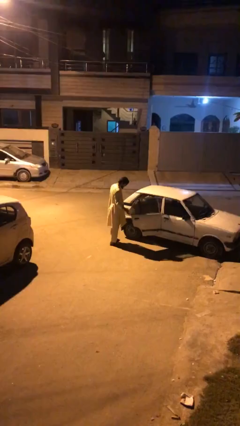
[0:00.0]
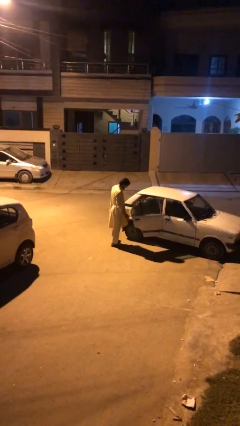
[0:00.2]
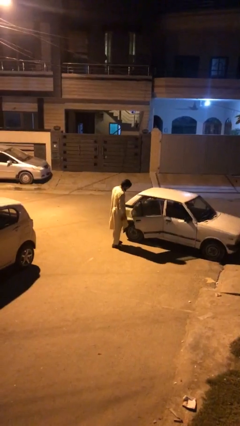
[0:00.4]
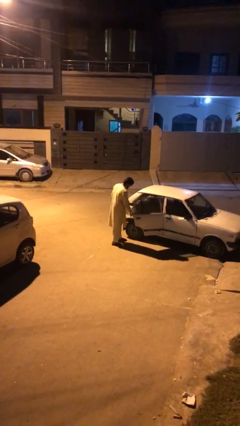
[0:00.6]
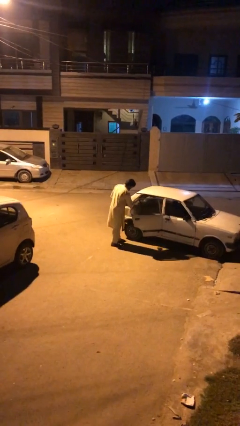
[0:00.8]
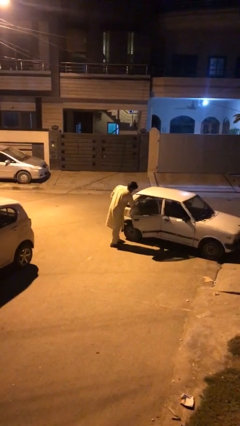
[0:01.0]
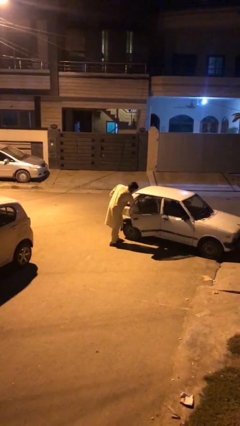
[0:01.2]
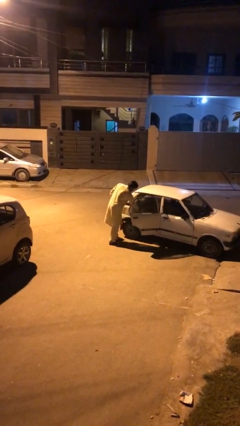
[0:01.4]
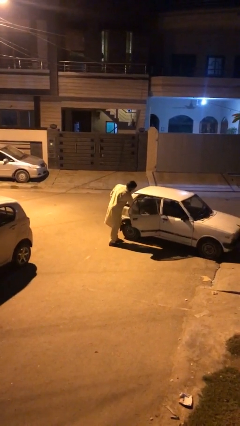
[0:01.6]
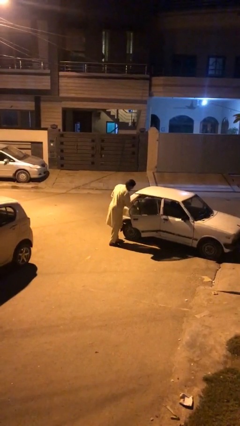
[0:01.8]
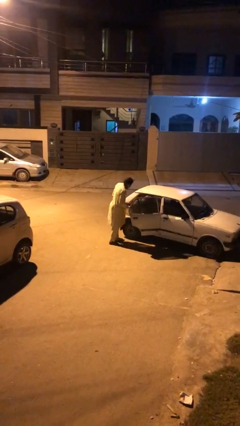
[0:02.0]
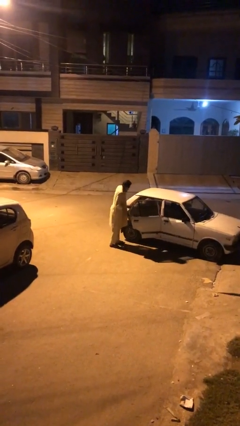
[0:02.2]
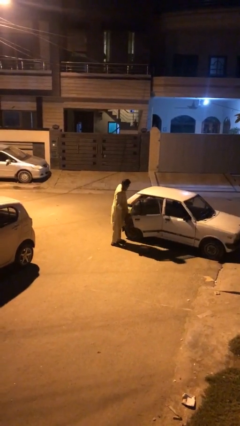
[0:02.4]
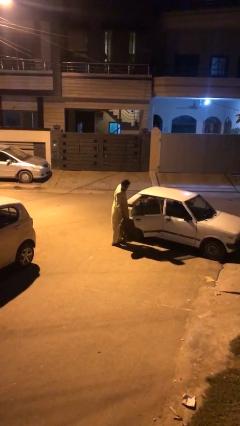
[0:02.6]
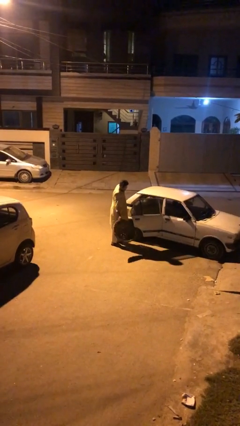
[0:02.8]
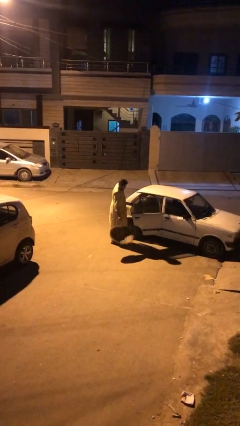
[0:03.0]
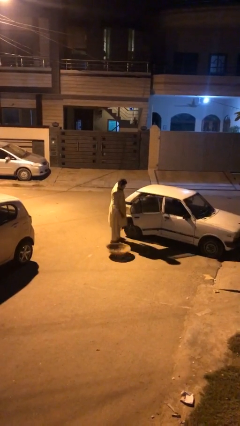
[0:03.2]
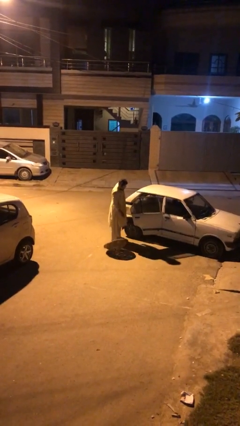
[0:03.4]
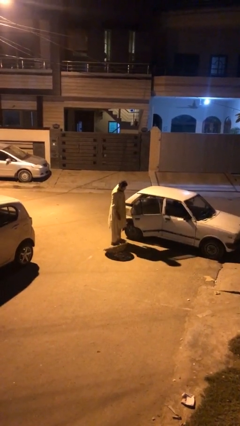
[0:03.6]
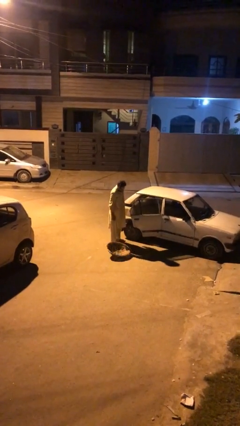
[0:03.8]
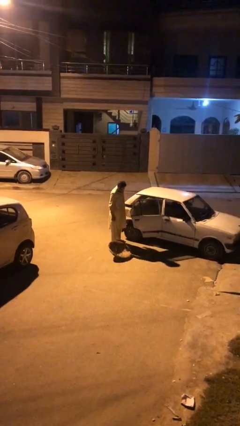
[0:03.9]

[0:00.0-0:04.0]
person unloads car

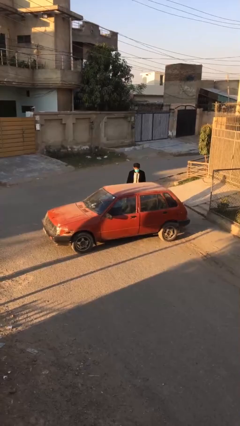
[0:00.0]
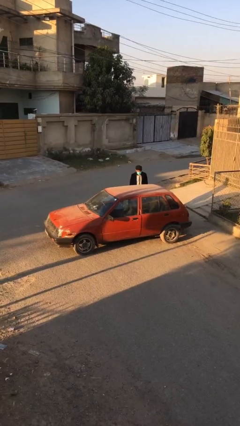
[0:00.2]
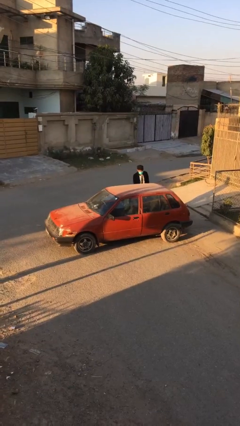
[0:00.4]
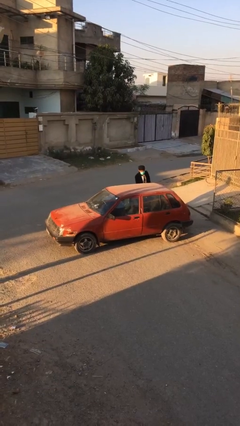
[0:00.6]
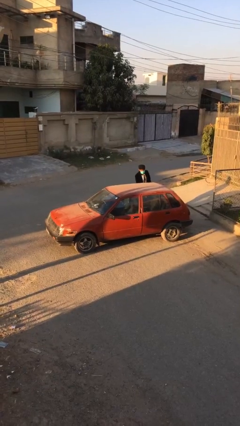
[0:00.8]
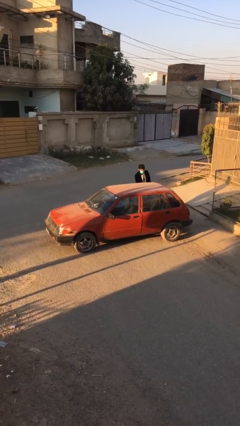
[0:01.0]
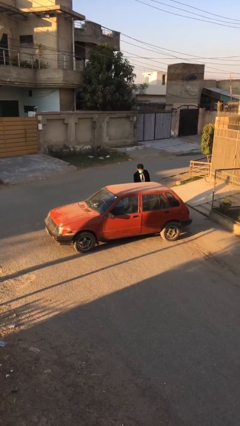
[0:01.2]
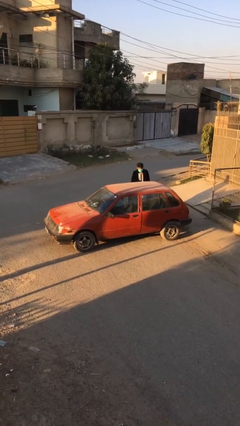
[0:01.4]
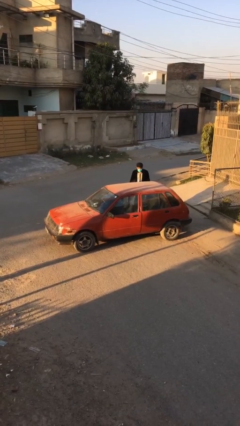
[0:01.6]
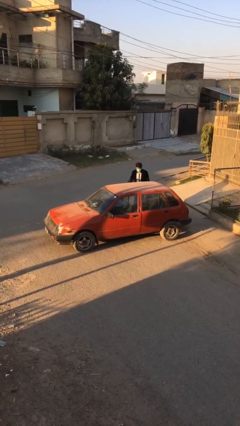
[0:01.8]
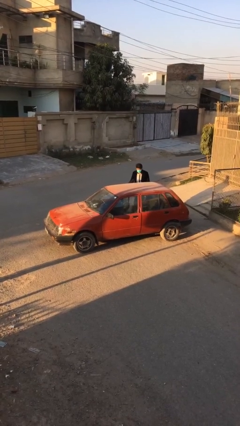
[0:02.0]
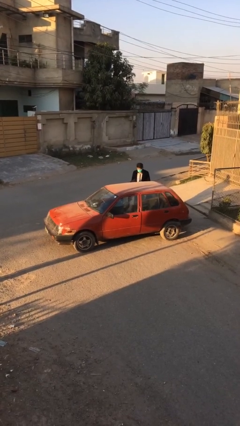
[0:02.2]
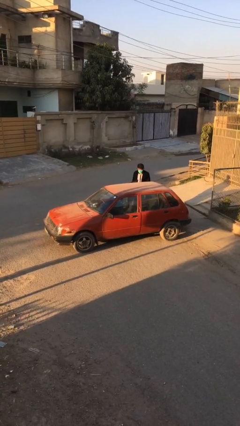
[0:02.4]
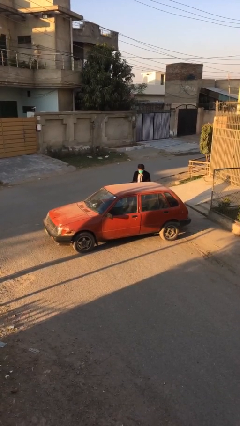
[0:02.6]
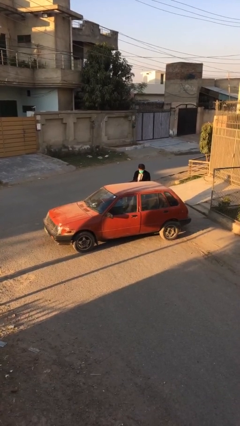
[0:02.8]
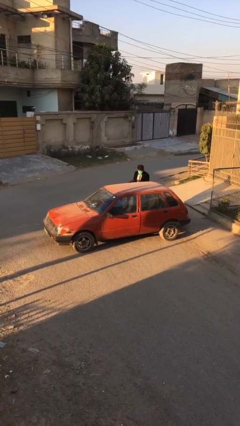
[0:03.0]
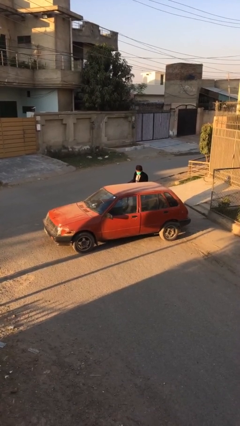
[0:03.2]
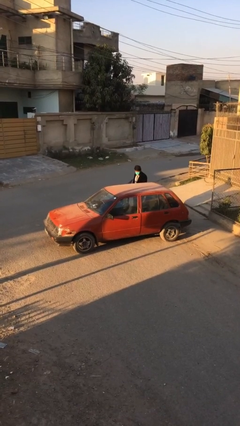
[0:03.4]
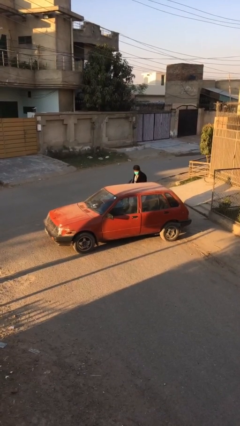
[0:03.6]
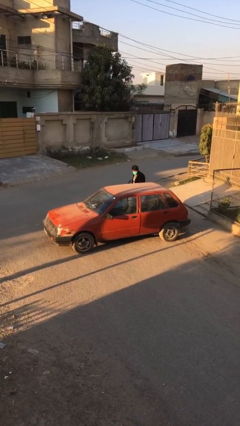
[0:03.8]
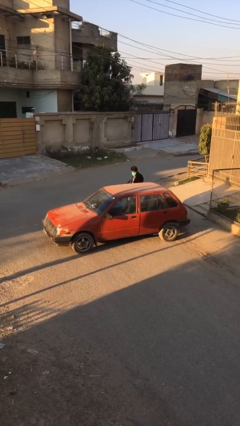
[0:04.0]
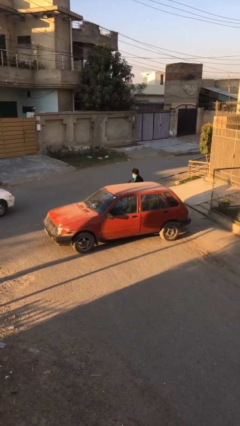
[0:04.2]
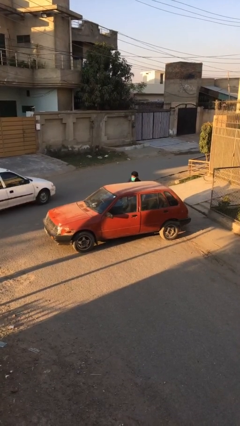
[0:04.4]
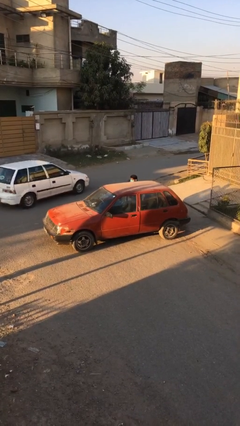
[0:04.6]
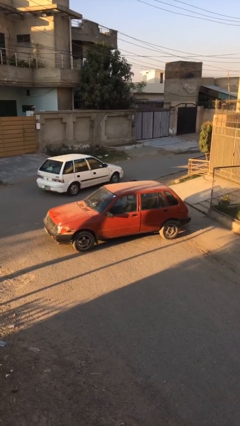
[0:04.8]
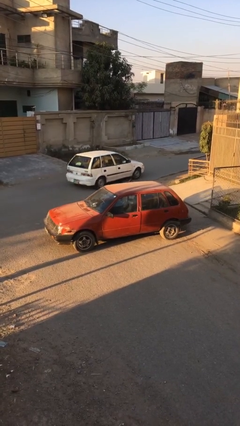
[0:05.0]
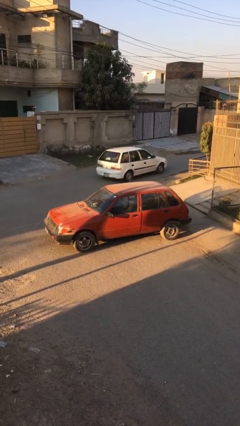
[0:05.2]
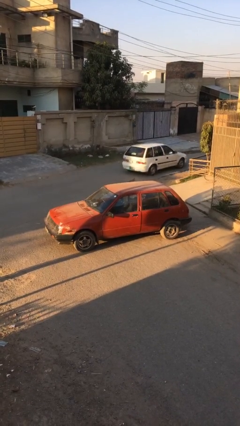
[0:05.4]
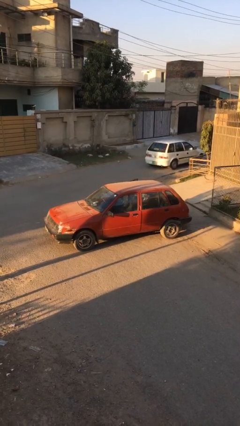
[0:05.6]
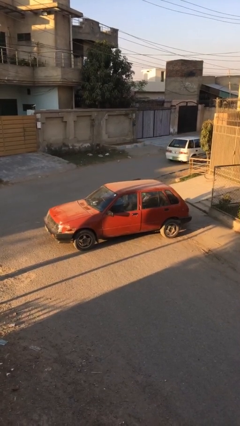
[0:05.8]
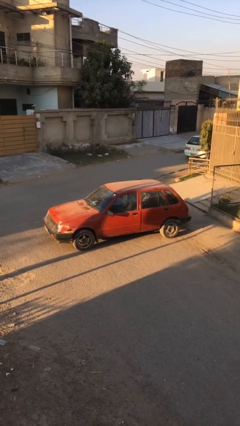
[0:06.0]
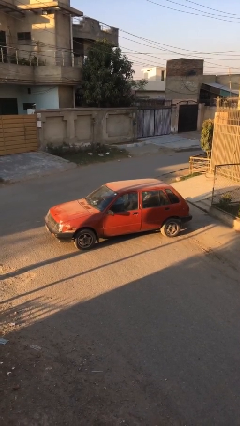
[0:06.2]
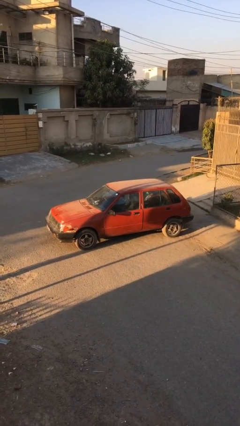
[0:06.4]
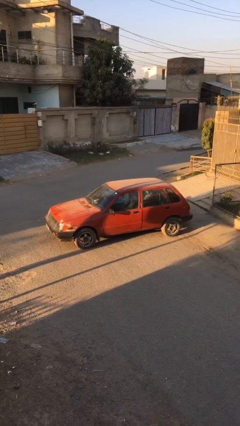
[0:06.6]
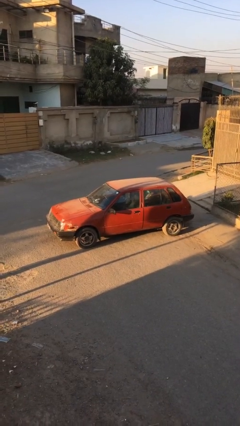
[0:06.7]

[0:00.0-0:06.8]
car picks up person

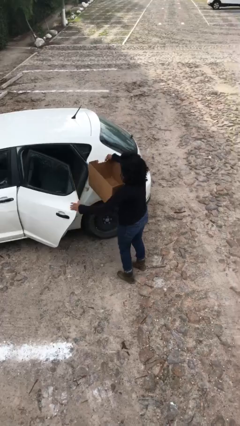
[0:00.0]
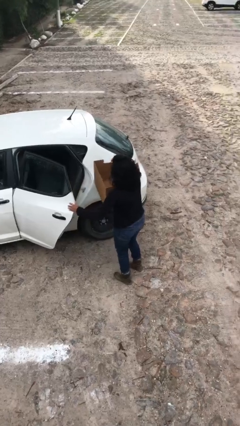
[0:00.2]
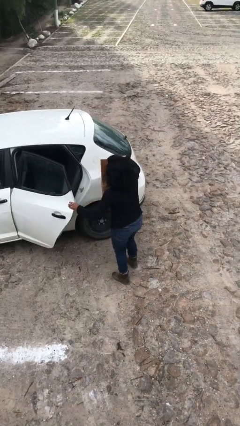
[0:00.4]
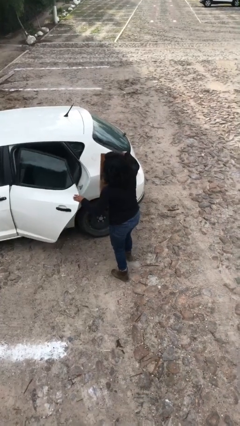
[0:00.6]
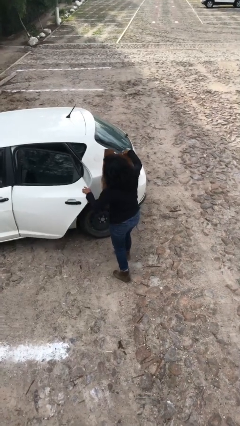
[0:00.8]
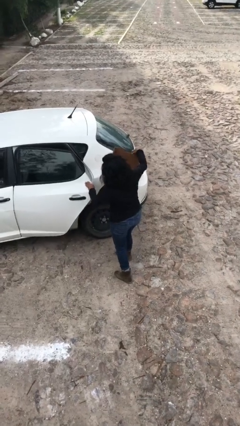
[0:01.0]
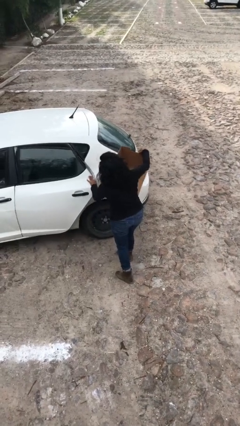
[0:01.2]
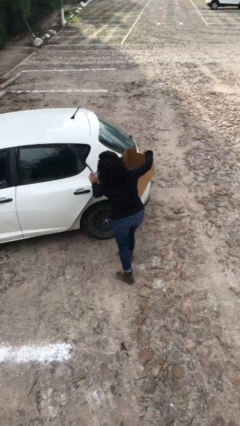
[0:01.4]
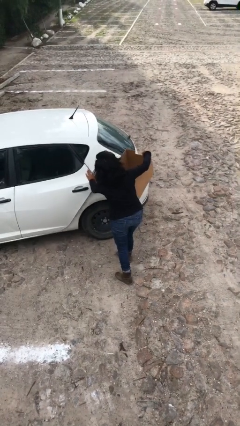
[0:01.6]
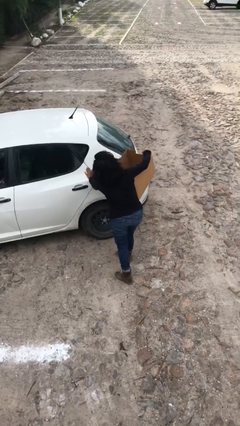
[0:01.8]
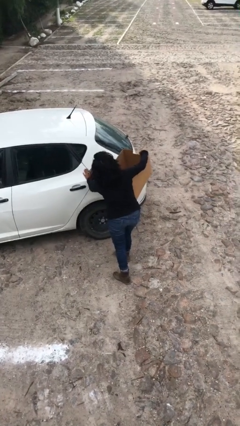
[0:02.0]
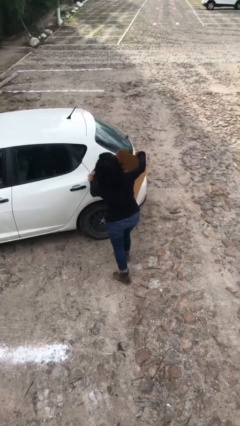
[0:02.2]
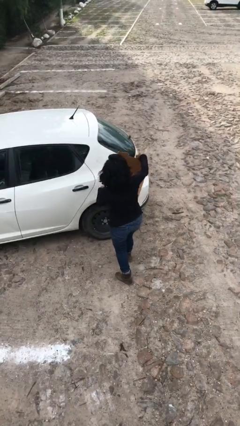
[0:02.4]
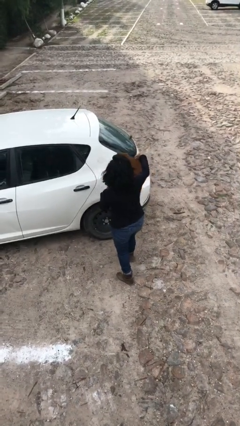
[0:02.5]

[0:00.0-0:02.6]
person closes car door

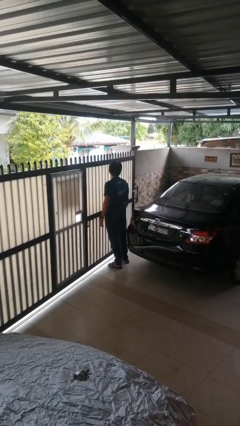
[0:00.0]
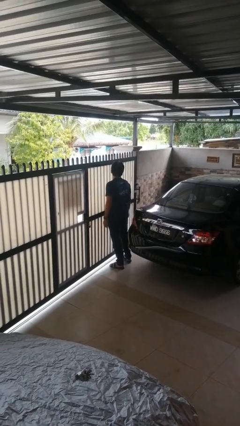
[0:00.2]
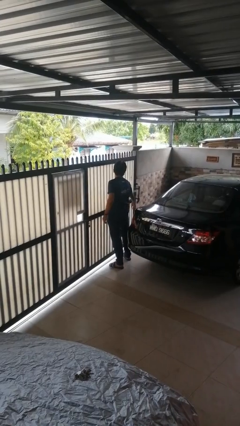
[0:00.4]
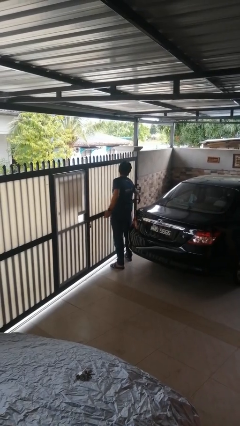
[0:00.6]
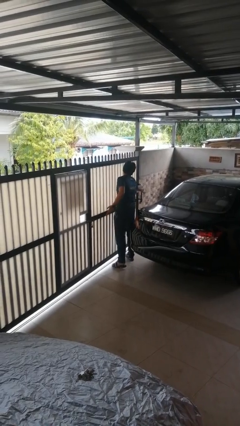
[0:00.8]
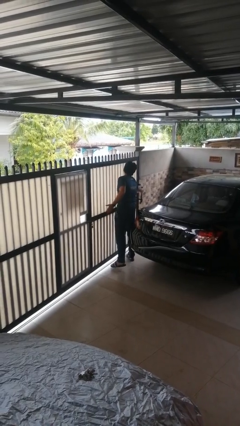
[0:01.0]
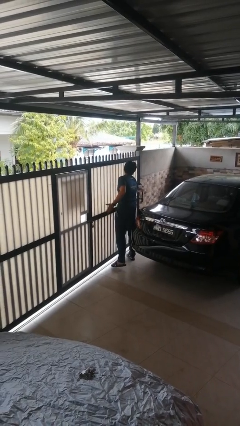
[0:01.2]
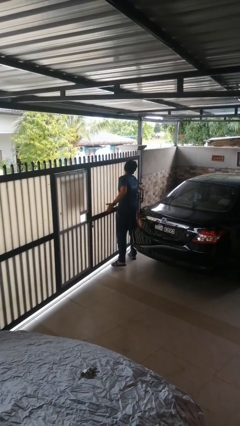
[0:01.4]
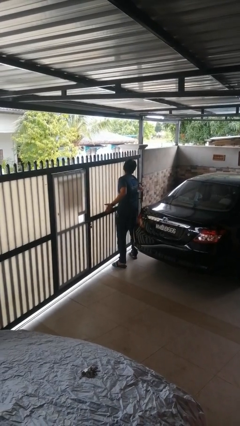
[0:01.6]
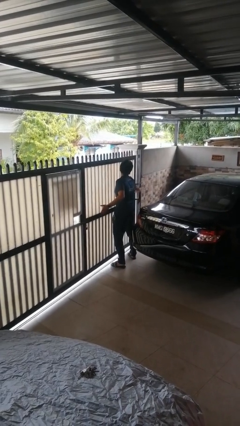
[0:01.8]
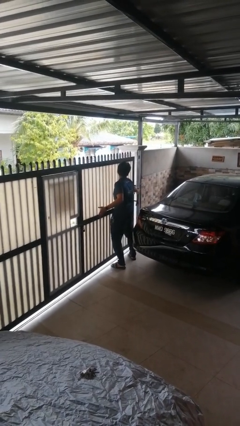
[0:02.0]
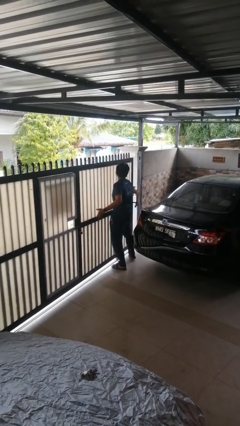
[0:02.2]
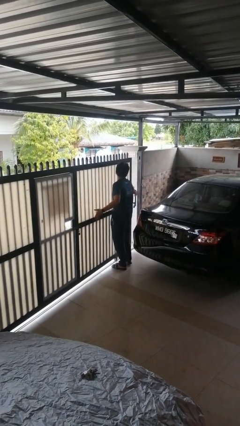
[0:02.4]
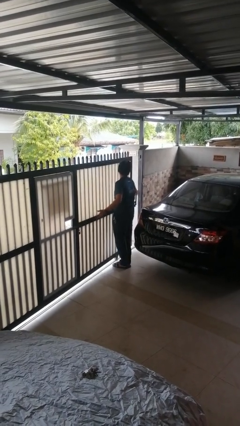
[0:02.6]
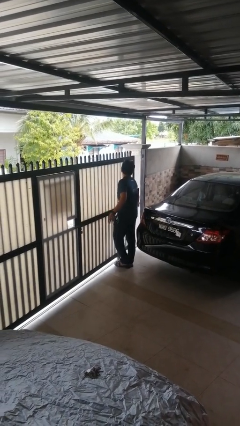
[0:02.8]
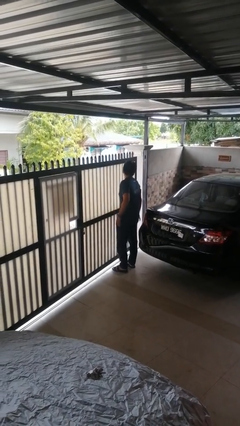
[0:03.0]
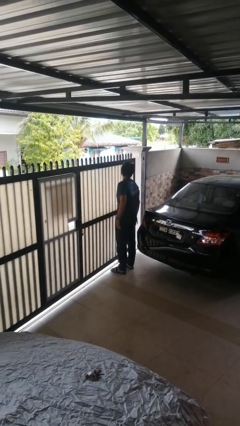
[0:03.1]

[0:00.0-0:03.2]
person opens sliding door

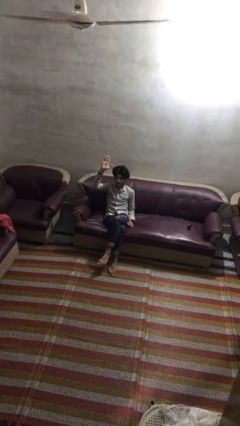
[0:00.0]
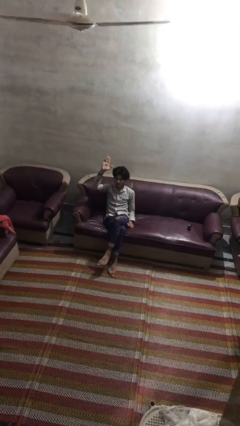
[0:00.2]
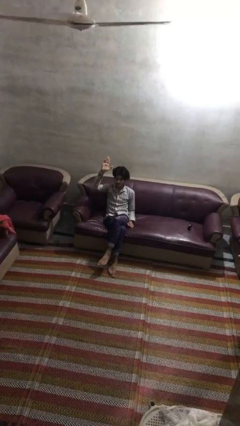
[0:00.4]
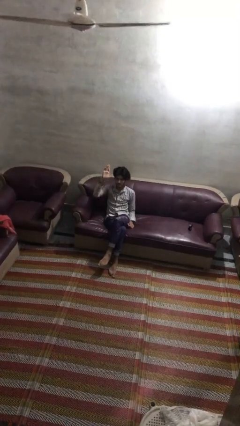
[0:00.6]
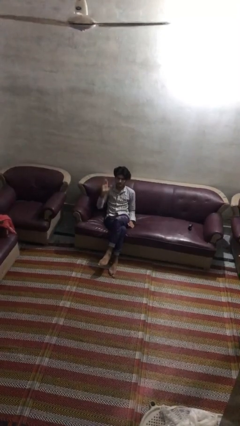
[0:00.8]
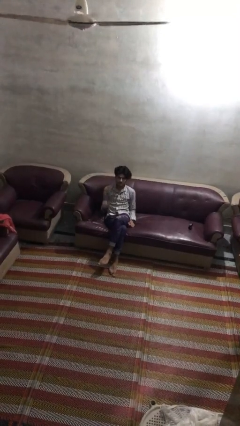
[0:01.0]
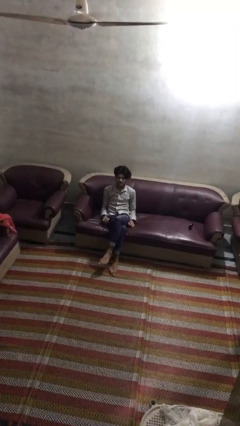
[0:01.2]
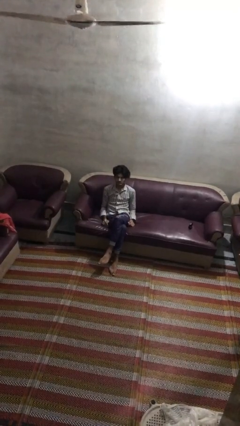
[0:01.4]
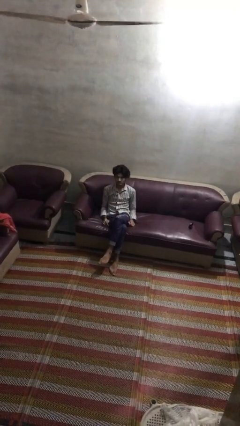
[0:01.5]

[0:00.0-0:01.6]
person gestures lower hand
